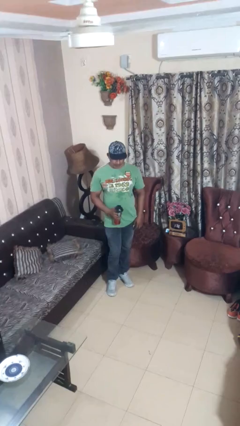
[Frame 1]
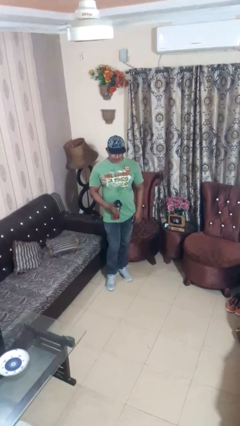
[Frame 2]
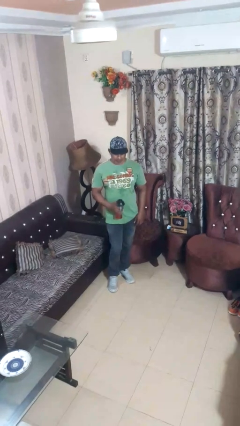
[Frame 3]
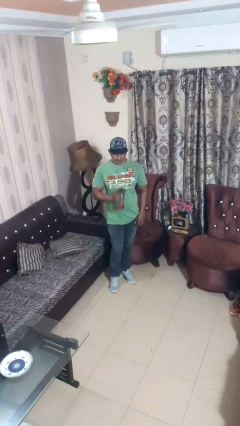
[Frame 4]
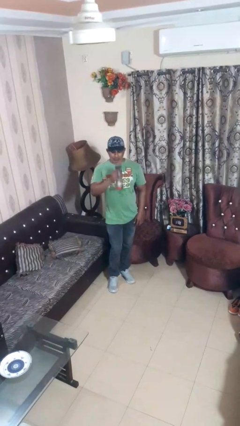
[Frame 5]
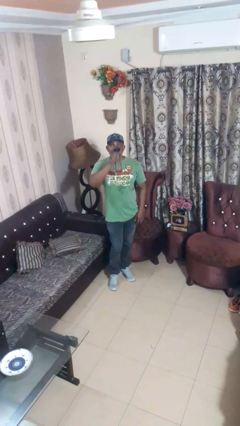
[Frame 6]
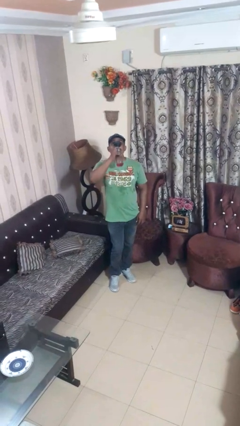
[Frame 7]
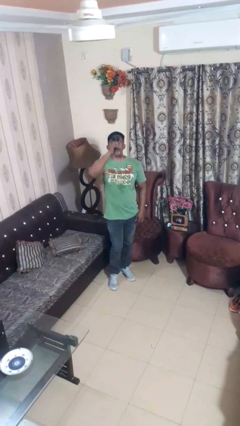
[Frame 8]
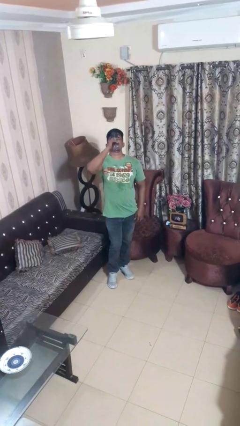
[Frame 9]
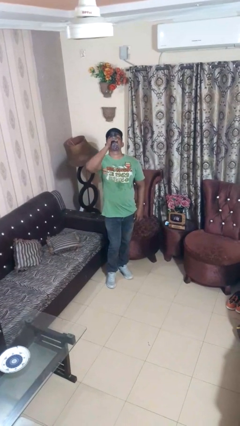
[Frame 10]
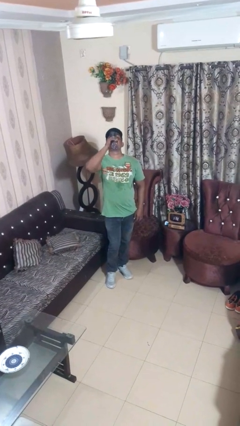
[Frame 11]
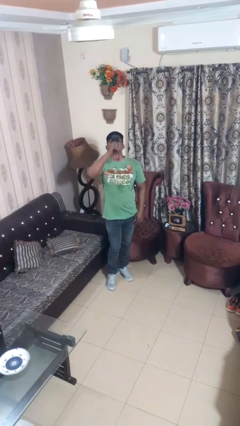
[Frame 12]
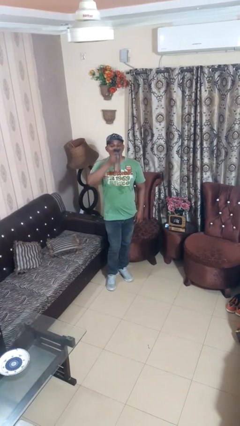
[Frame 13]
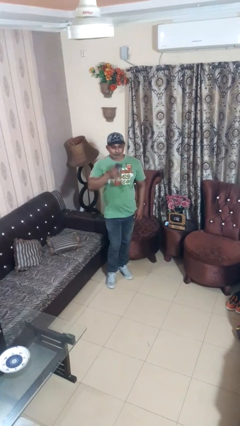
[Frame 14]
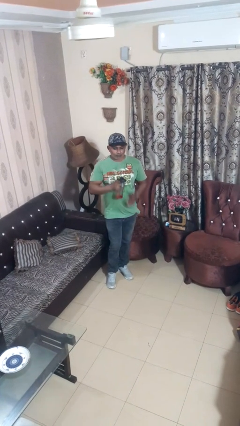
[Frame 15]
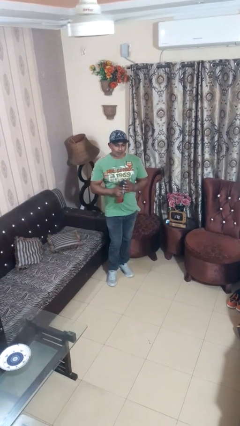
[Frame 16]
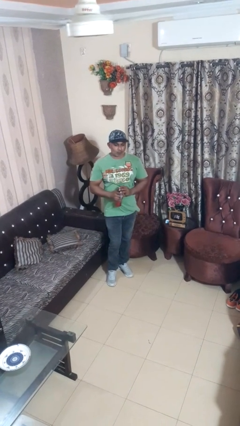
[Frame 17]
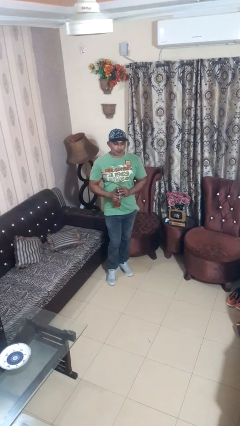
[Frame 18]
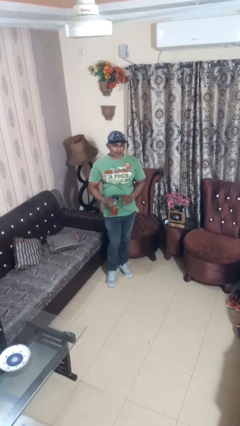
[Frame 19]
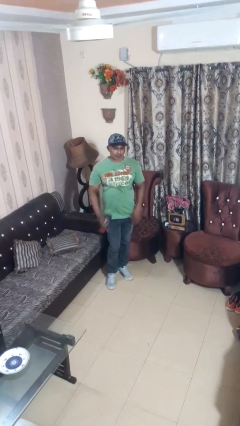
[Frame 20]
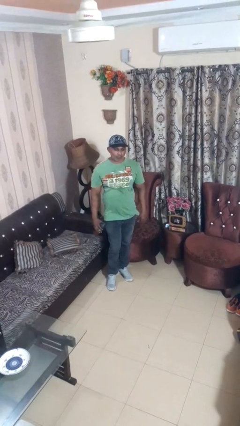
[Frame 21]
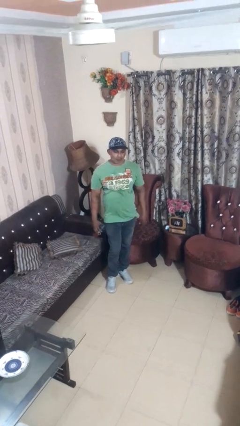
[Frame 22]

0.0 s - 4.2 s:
person drinks from beverage can

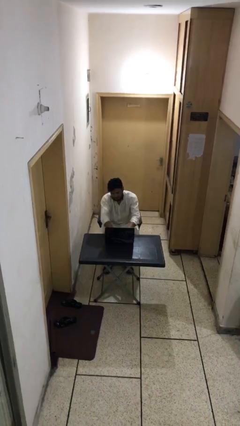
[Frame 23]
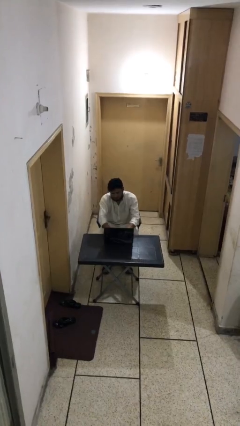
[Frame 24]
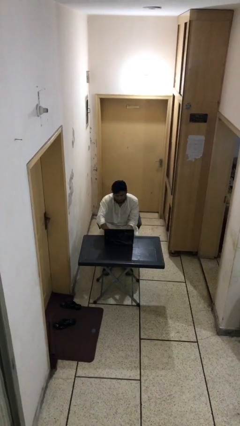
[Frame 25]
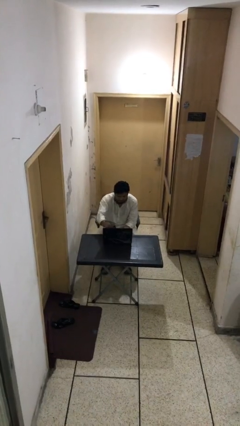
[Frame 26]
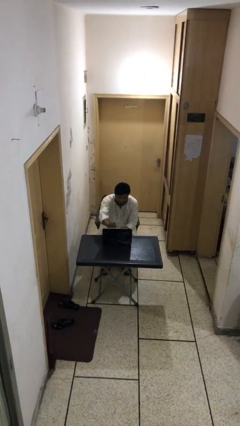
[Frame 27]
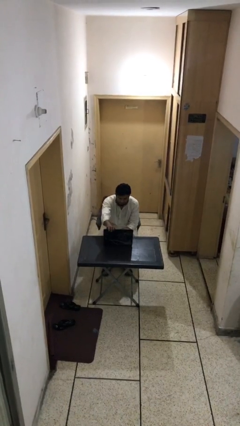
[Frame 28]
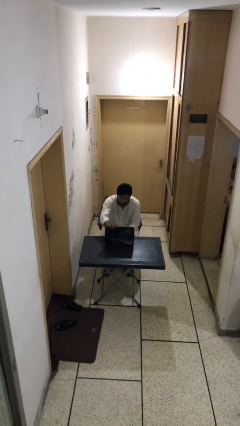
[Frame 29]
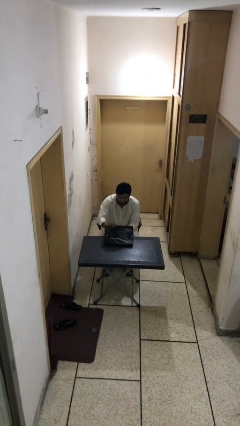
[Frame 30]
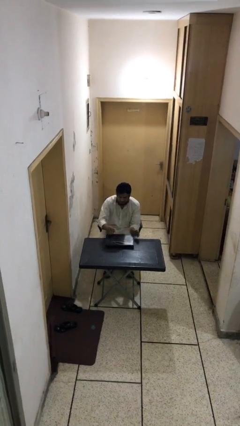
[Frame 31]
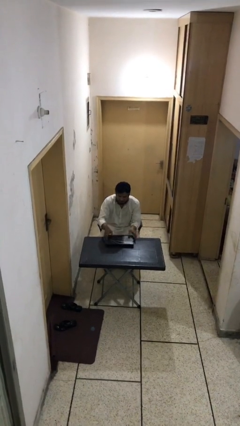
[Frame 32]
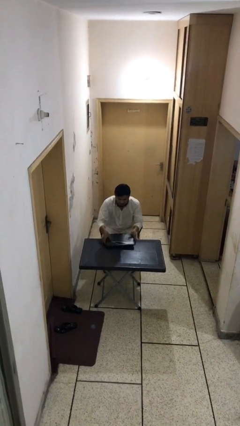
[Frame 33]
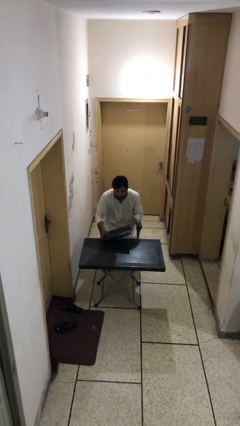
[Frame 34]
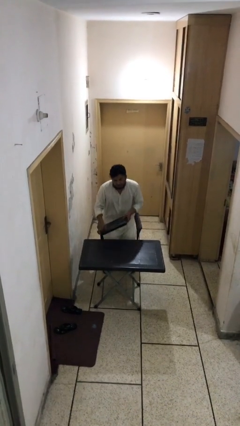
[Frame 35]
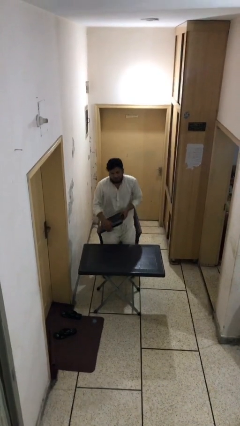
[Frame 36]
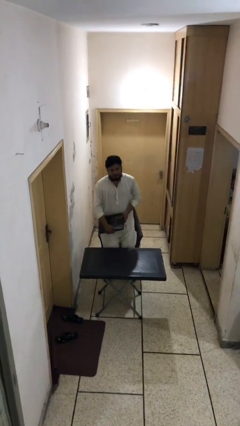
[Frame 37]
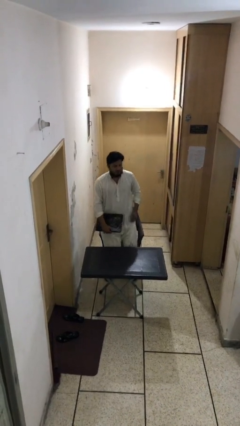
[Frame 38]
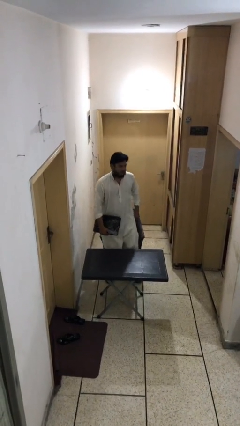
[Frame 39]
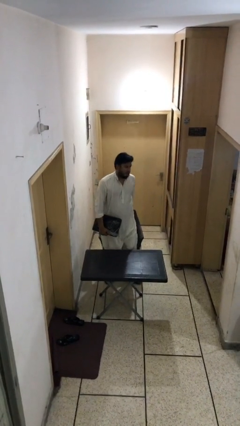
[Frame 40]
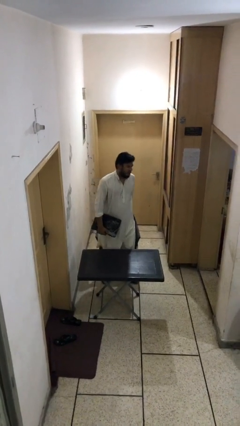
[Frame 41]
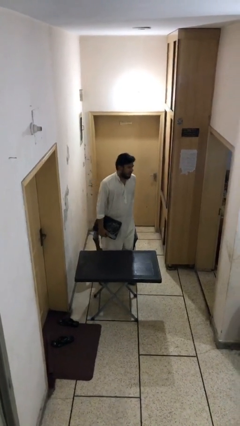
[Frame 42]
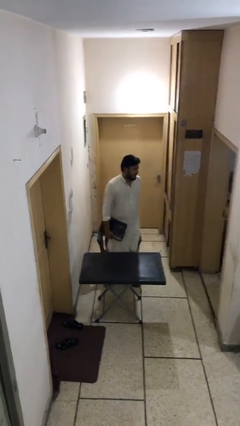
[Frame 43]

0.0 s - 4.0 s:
person stands up

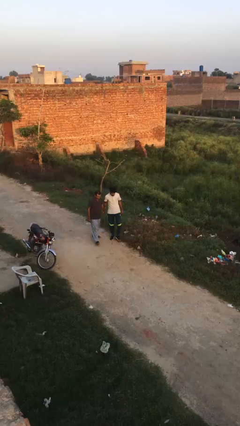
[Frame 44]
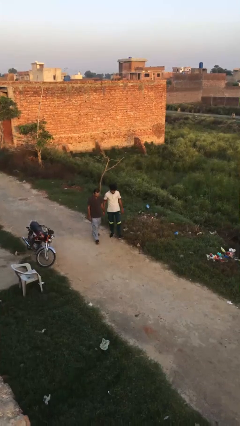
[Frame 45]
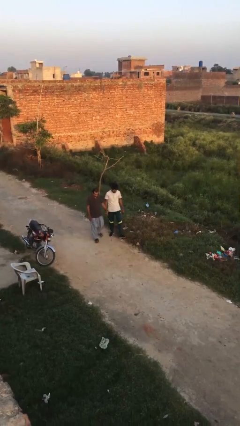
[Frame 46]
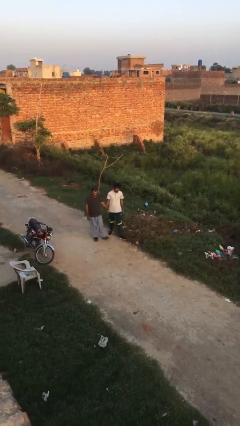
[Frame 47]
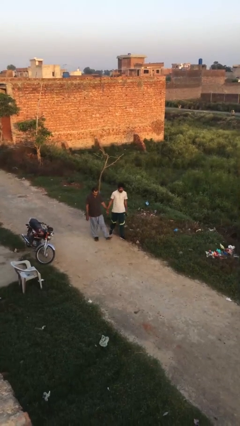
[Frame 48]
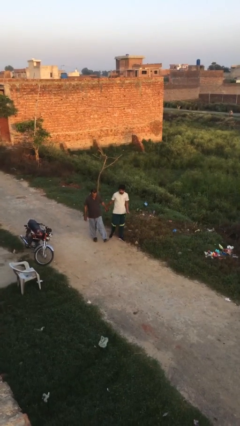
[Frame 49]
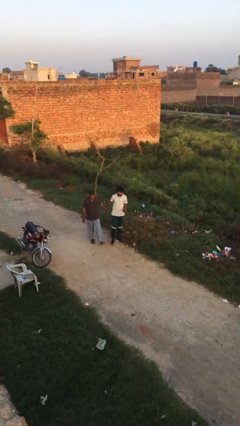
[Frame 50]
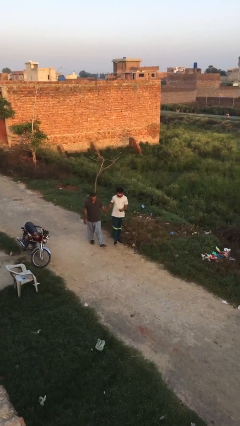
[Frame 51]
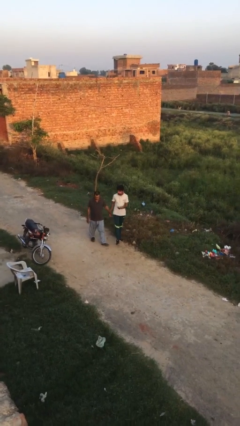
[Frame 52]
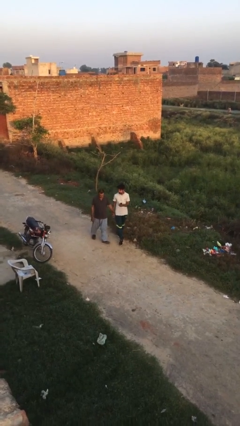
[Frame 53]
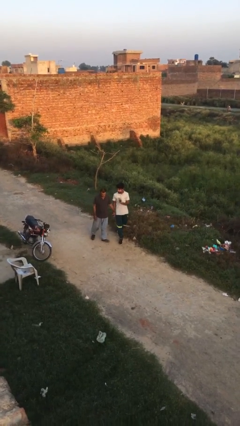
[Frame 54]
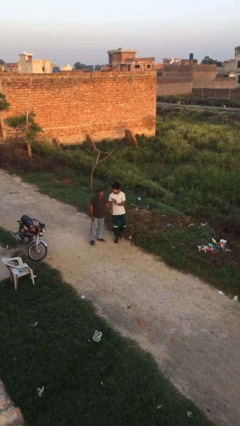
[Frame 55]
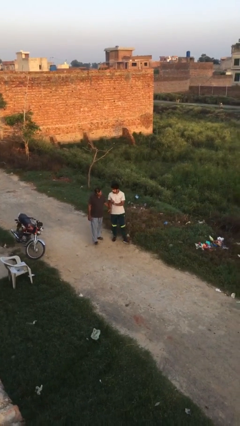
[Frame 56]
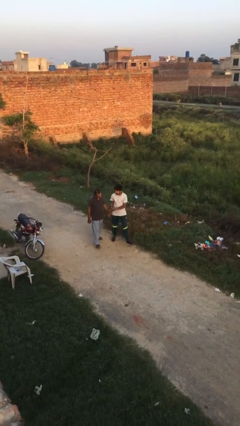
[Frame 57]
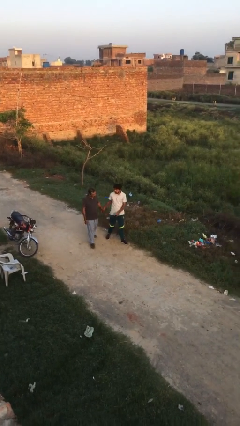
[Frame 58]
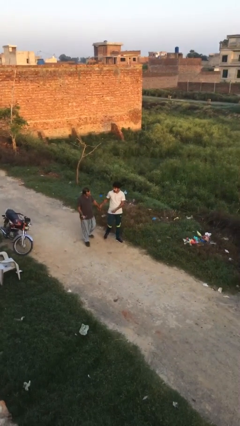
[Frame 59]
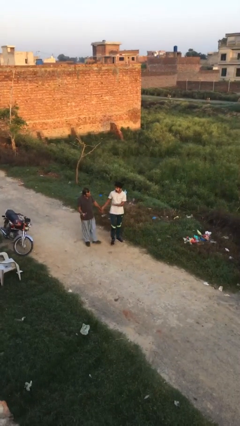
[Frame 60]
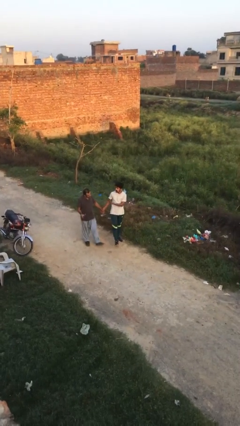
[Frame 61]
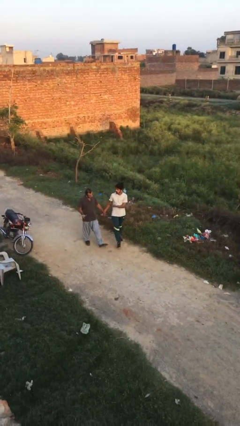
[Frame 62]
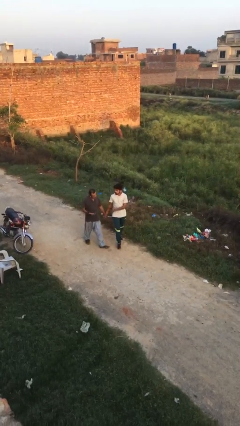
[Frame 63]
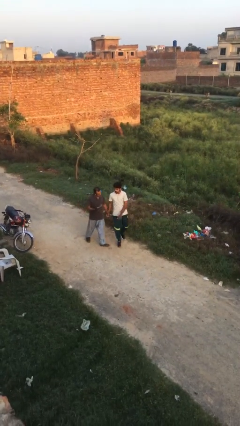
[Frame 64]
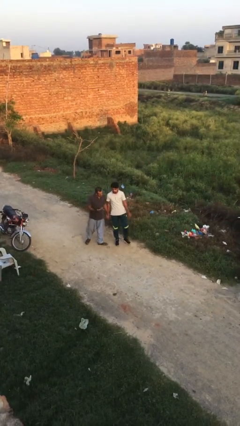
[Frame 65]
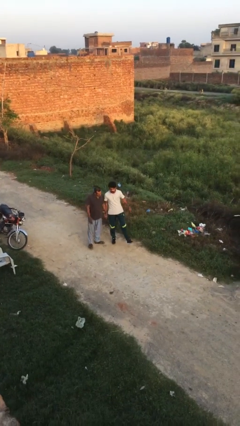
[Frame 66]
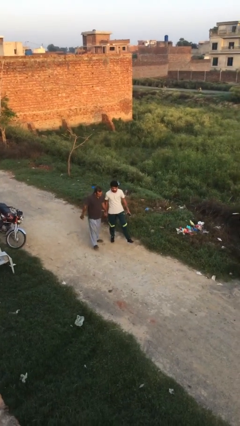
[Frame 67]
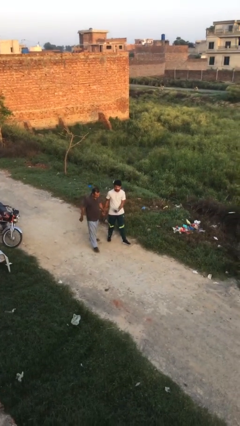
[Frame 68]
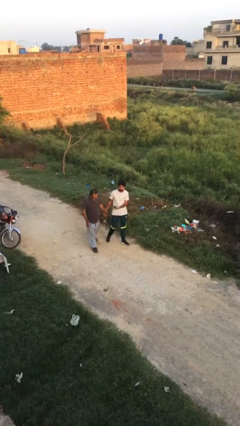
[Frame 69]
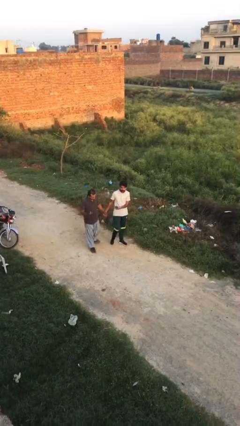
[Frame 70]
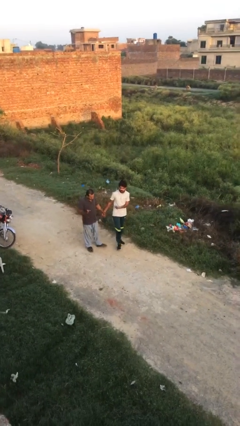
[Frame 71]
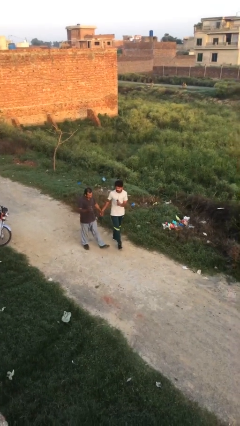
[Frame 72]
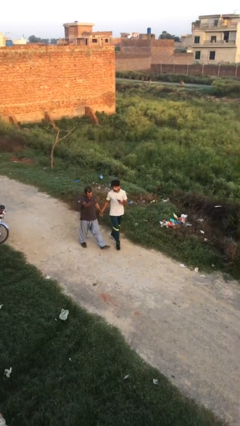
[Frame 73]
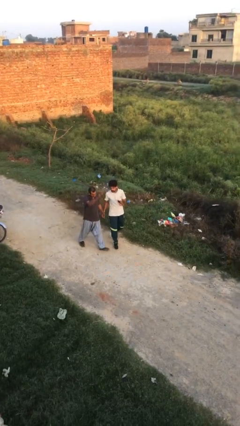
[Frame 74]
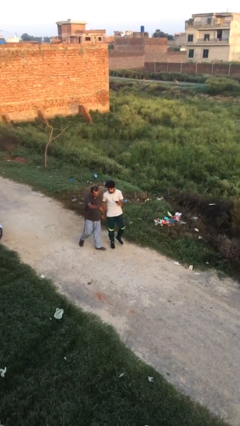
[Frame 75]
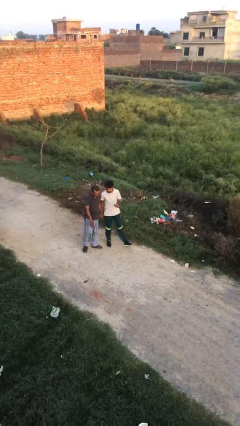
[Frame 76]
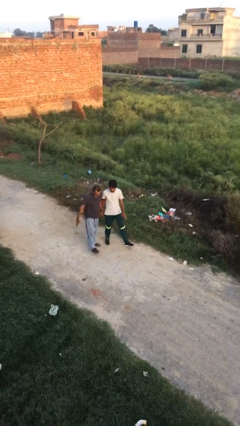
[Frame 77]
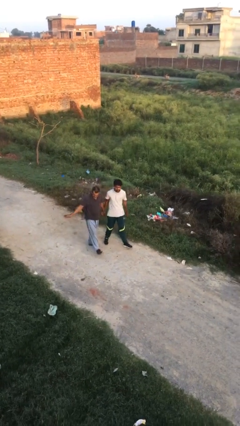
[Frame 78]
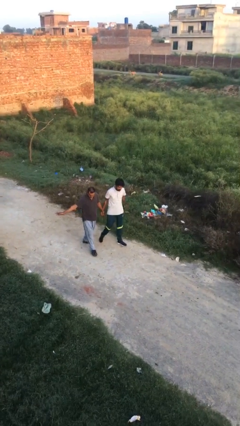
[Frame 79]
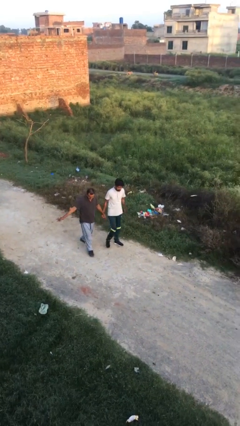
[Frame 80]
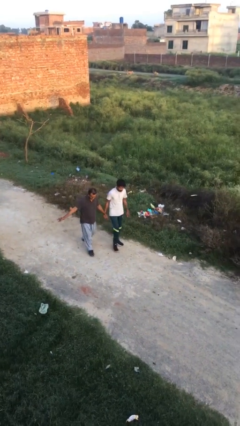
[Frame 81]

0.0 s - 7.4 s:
person holds hand

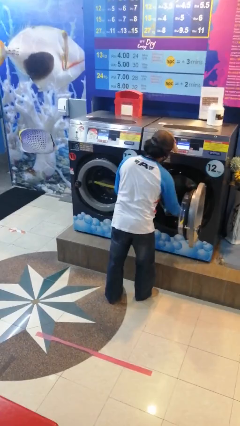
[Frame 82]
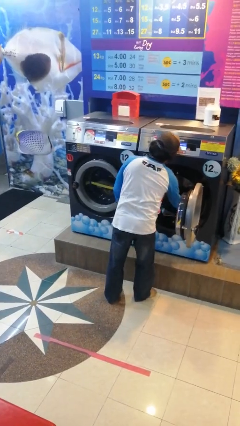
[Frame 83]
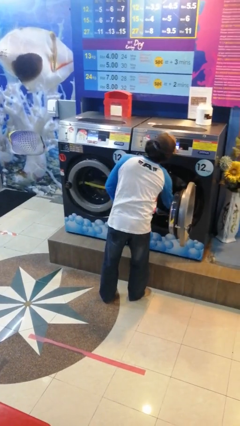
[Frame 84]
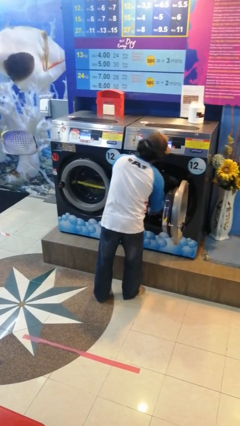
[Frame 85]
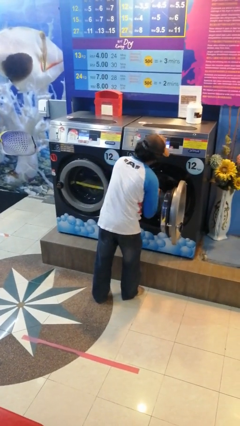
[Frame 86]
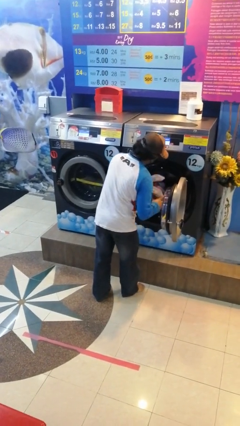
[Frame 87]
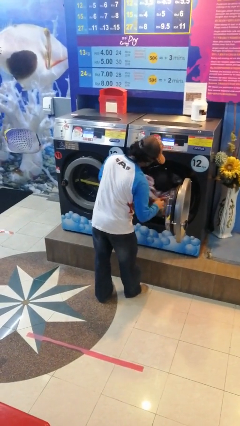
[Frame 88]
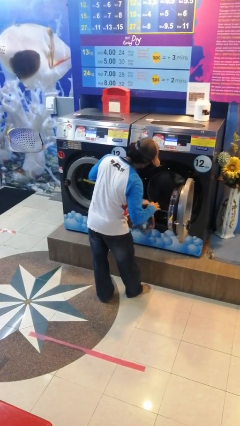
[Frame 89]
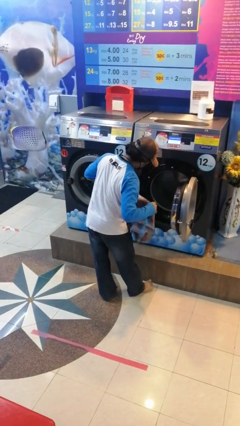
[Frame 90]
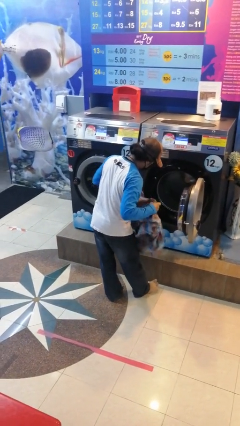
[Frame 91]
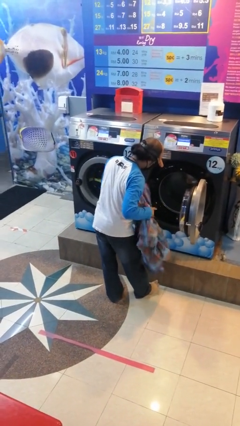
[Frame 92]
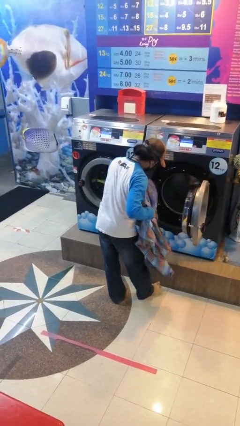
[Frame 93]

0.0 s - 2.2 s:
person unloads clotheswasher

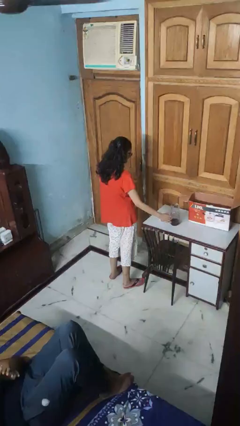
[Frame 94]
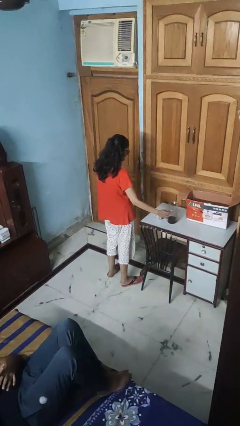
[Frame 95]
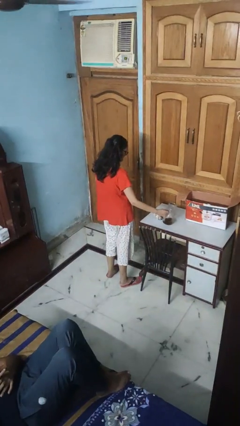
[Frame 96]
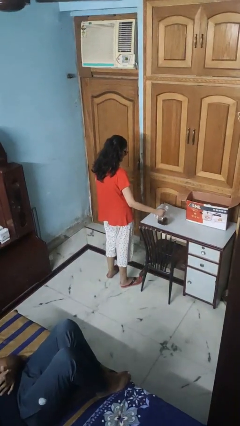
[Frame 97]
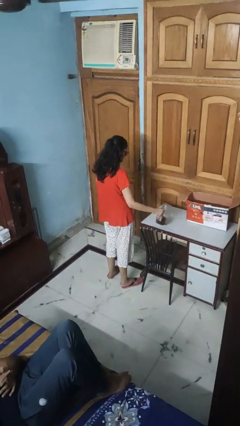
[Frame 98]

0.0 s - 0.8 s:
person pours coffee into mug
